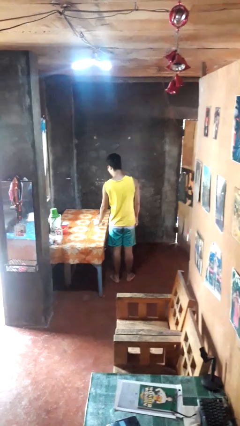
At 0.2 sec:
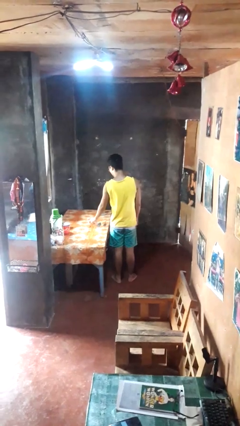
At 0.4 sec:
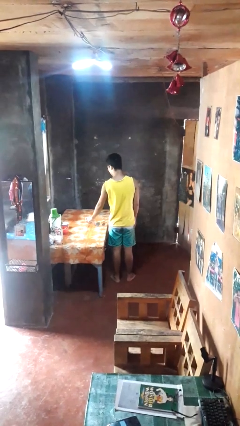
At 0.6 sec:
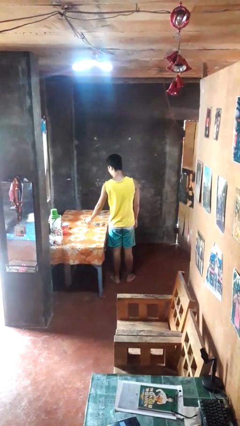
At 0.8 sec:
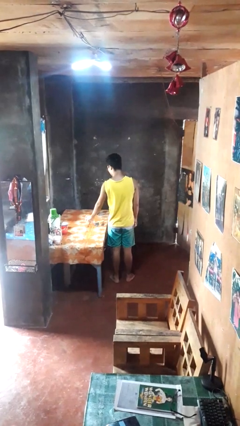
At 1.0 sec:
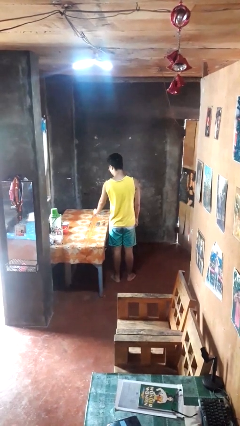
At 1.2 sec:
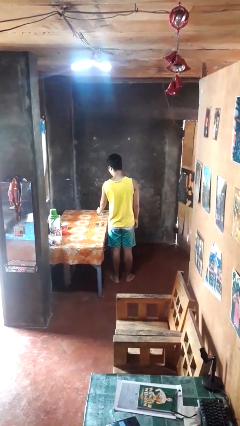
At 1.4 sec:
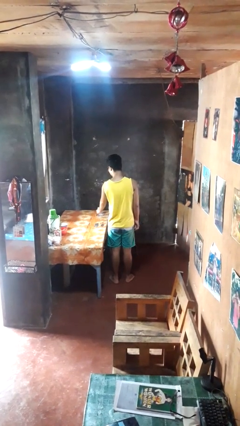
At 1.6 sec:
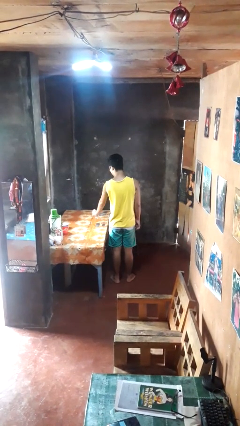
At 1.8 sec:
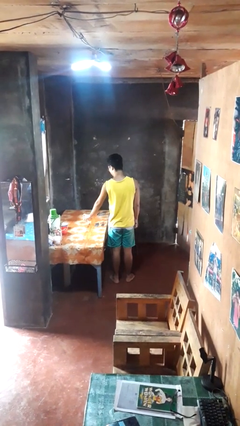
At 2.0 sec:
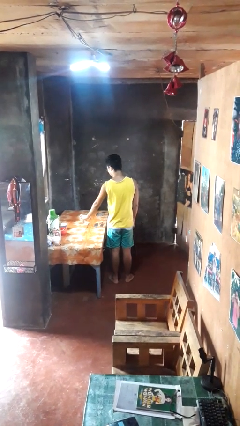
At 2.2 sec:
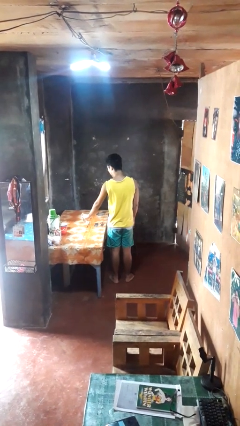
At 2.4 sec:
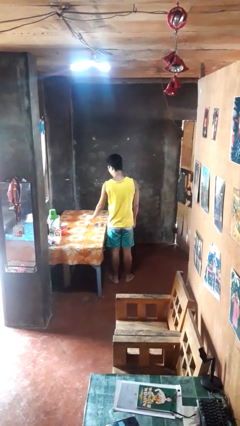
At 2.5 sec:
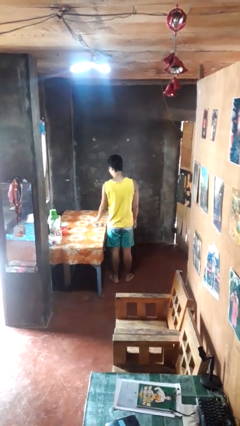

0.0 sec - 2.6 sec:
person sprays from bottle

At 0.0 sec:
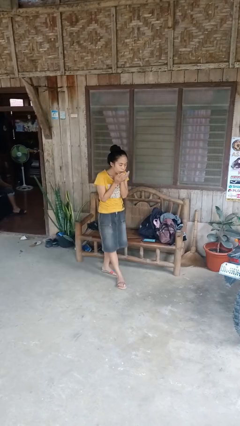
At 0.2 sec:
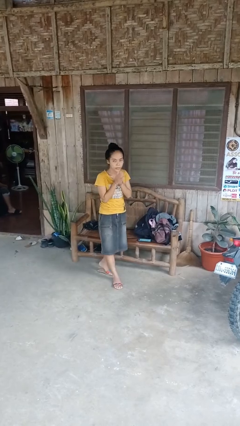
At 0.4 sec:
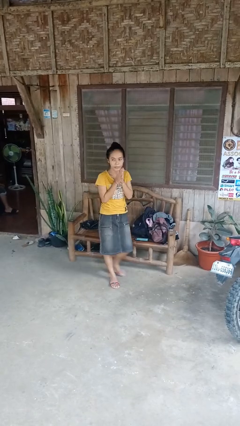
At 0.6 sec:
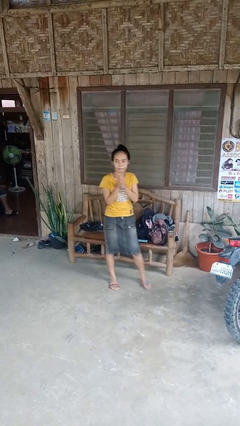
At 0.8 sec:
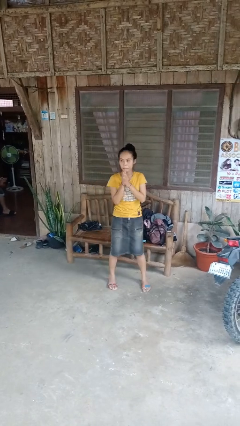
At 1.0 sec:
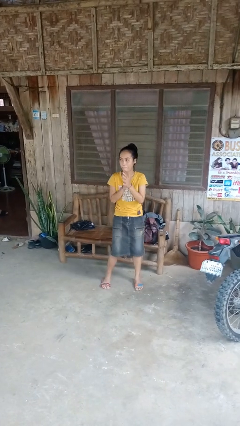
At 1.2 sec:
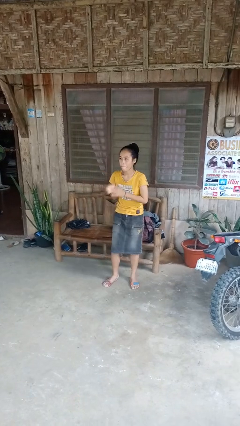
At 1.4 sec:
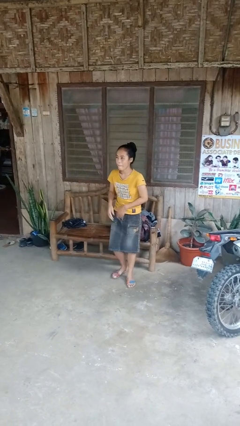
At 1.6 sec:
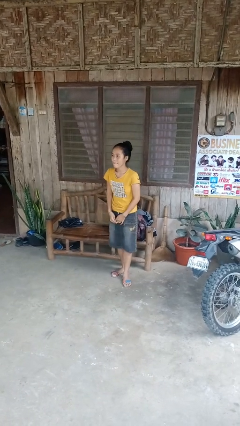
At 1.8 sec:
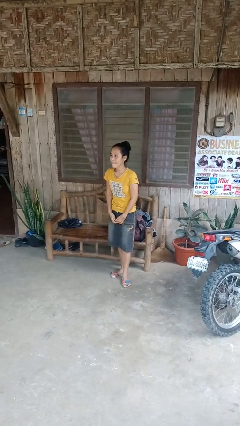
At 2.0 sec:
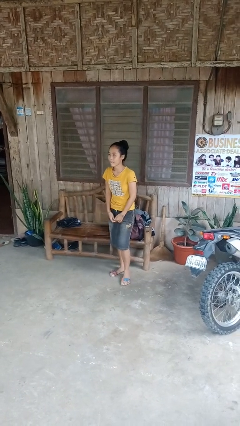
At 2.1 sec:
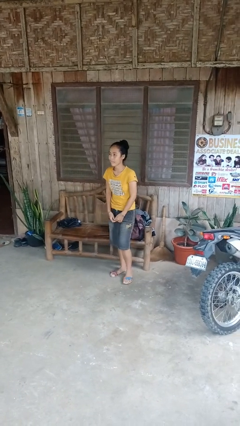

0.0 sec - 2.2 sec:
person blows into hands

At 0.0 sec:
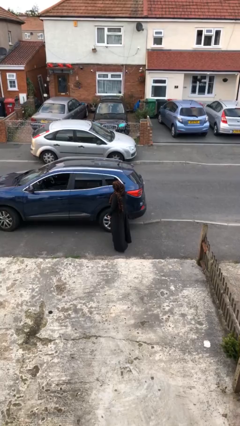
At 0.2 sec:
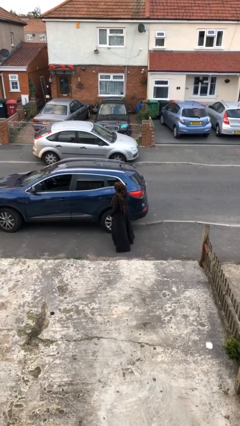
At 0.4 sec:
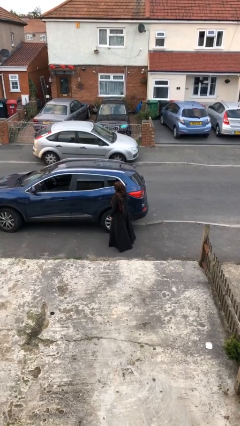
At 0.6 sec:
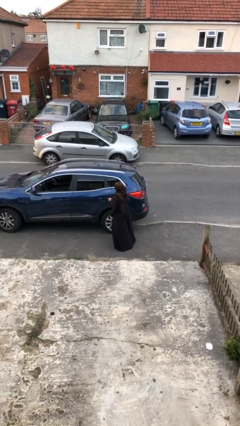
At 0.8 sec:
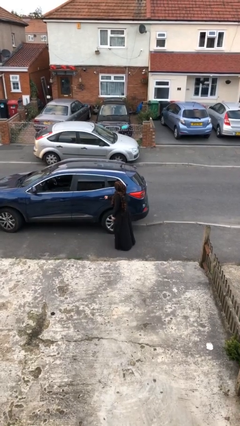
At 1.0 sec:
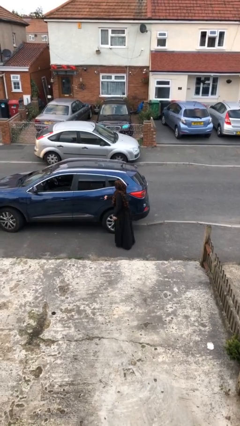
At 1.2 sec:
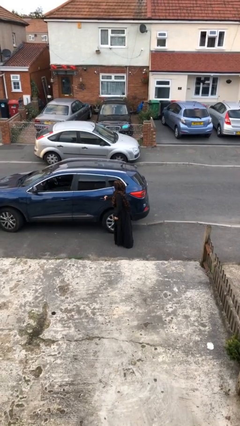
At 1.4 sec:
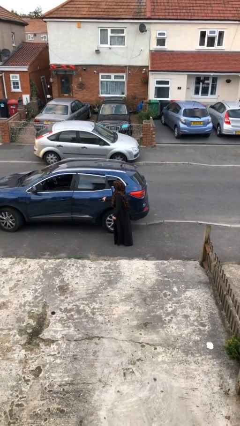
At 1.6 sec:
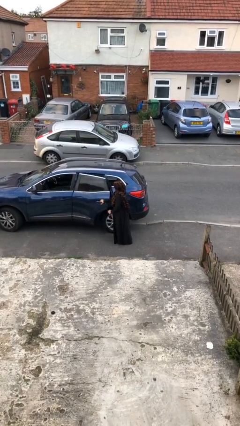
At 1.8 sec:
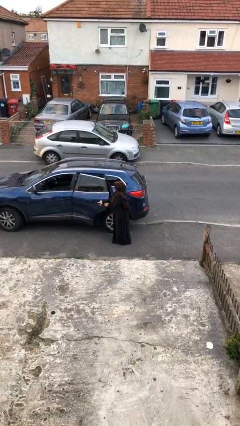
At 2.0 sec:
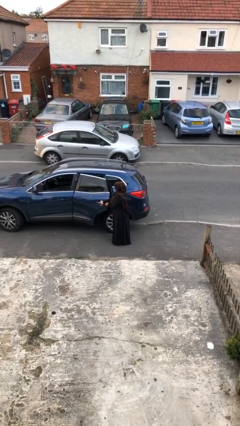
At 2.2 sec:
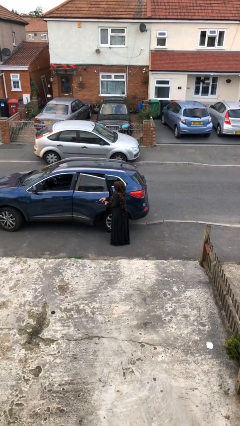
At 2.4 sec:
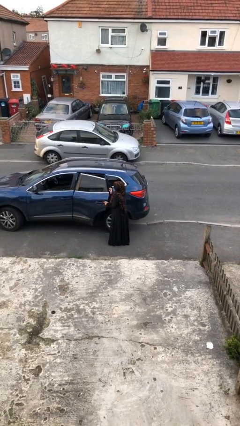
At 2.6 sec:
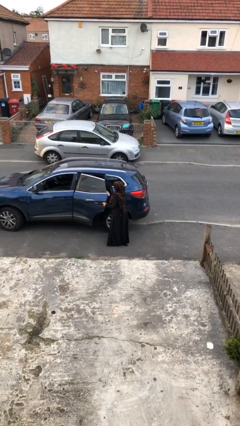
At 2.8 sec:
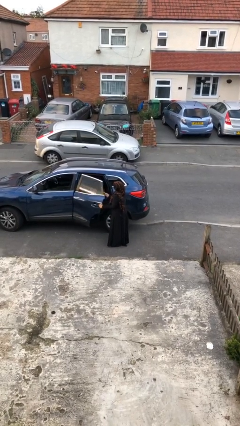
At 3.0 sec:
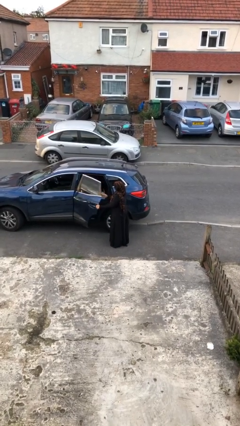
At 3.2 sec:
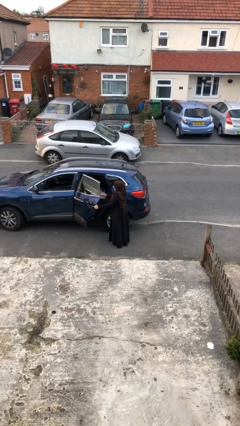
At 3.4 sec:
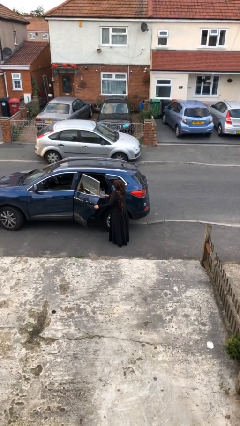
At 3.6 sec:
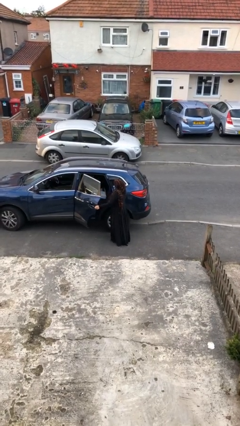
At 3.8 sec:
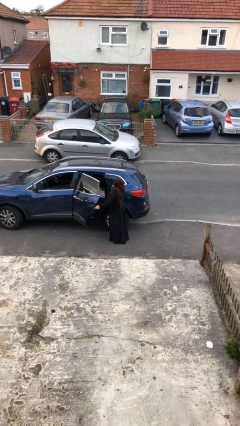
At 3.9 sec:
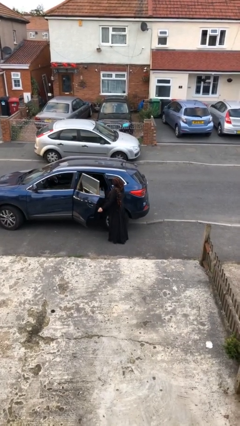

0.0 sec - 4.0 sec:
person opens car door

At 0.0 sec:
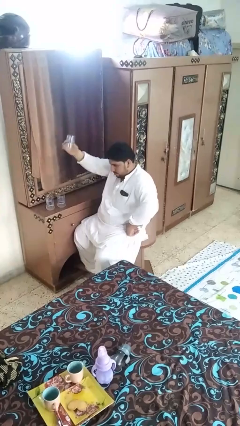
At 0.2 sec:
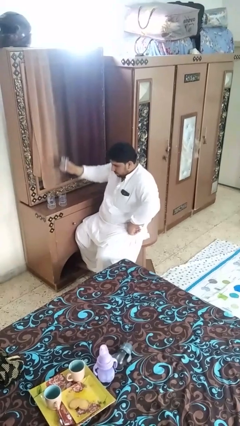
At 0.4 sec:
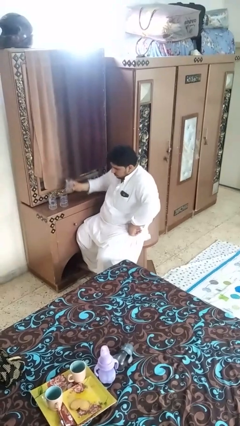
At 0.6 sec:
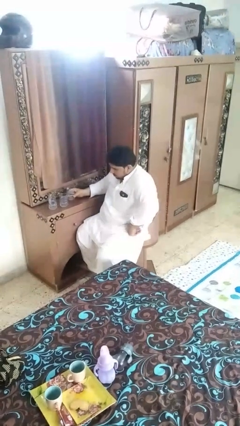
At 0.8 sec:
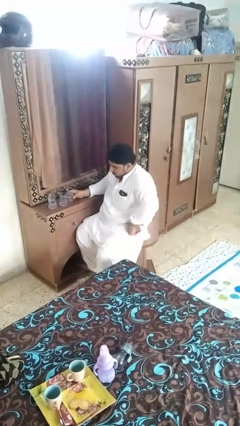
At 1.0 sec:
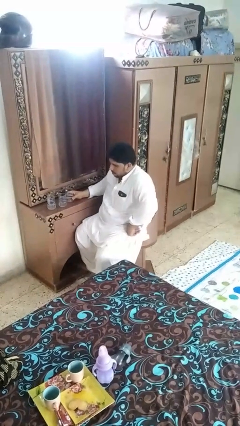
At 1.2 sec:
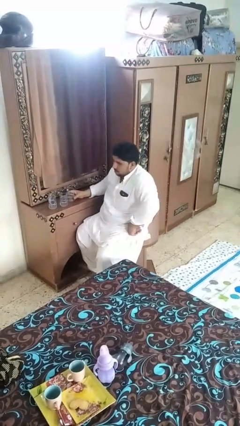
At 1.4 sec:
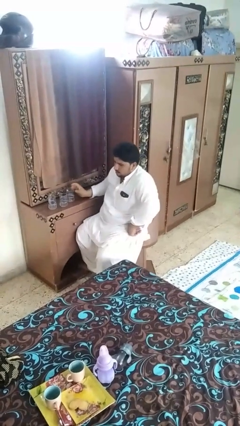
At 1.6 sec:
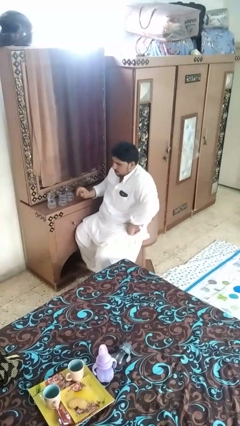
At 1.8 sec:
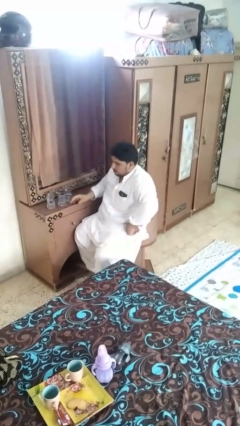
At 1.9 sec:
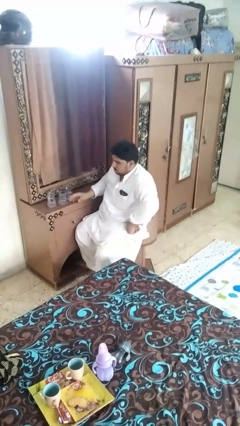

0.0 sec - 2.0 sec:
person puts down object on table

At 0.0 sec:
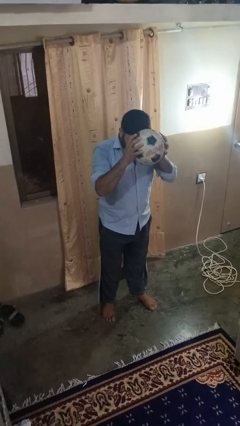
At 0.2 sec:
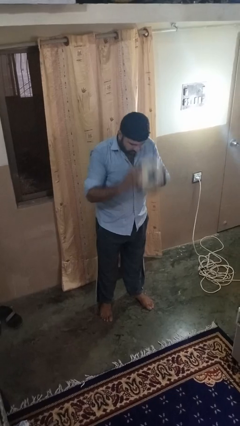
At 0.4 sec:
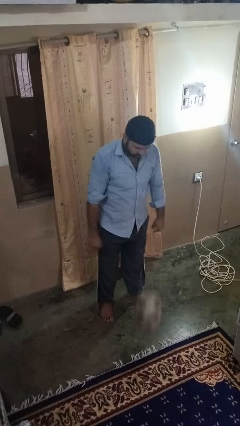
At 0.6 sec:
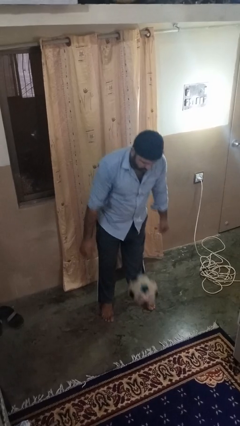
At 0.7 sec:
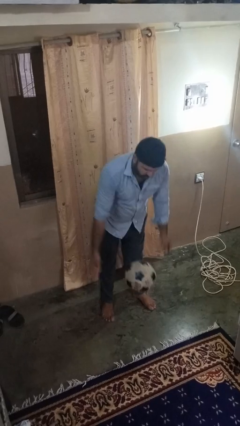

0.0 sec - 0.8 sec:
person bounces ball on floor

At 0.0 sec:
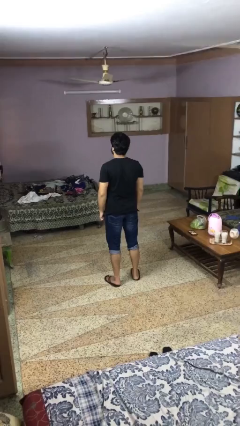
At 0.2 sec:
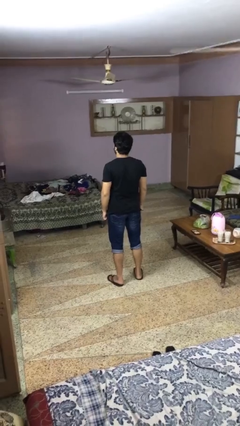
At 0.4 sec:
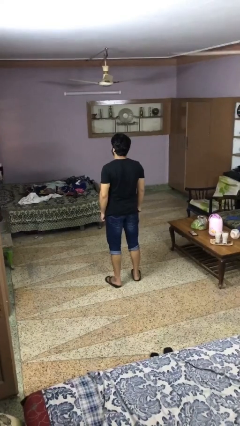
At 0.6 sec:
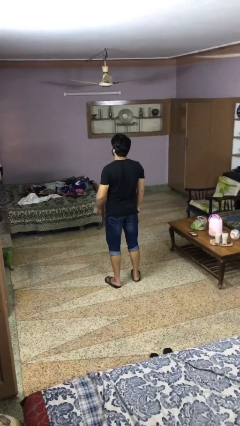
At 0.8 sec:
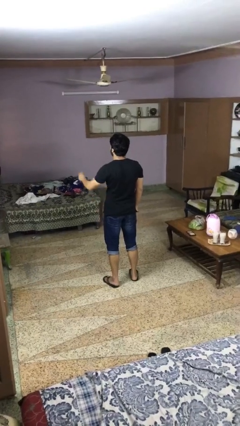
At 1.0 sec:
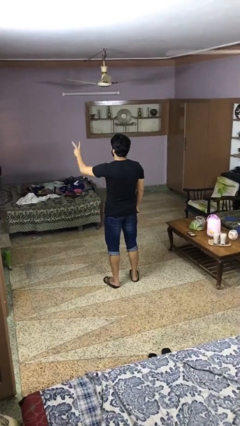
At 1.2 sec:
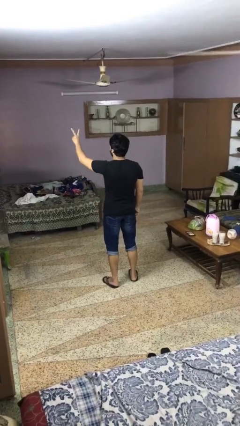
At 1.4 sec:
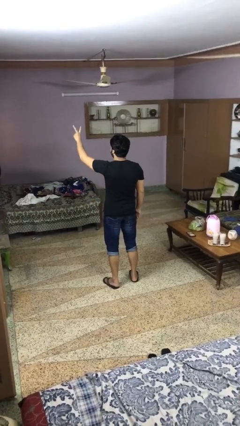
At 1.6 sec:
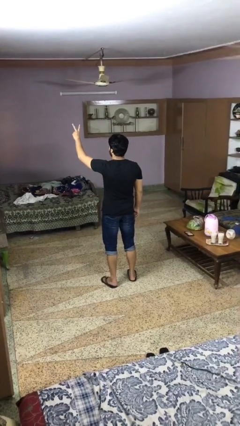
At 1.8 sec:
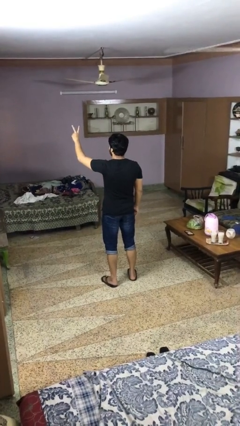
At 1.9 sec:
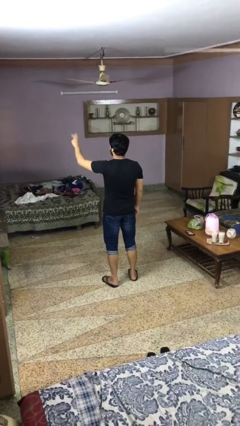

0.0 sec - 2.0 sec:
person gestures peace

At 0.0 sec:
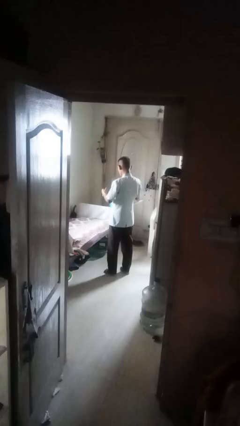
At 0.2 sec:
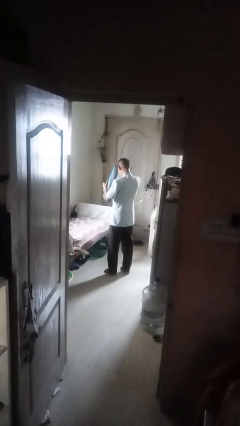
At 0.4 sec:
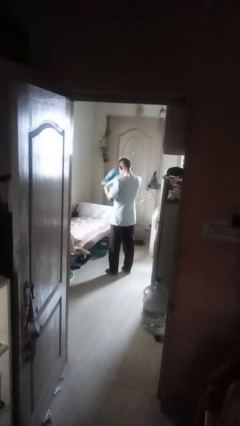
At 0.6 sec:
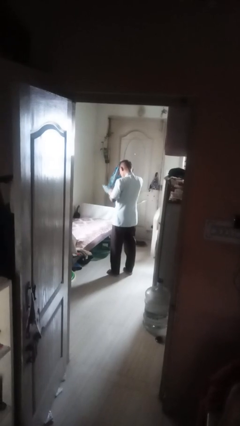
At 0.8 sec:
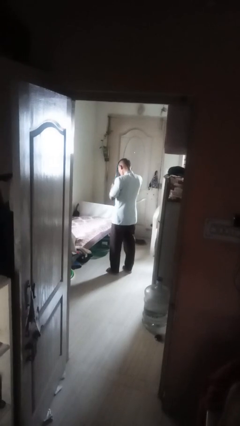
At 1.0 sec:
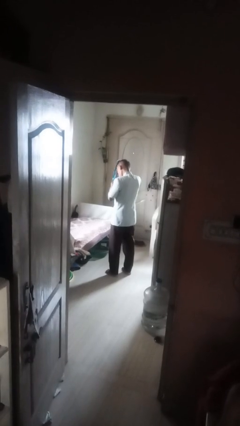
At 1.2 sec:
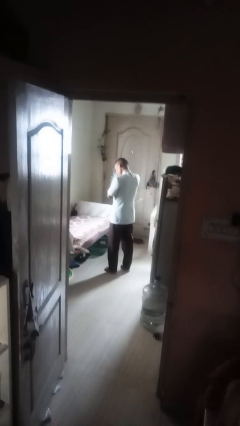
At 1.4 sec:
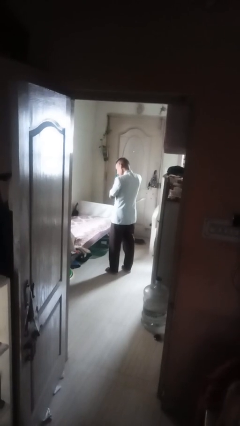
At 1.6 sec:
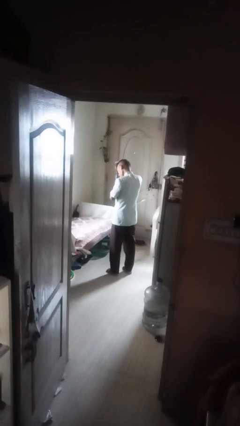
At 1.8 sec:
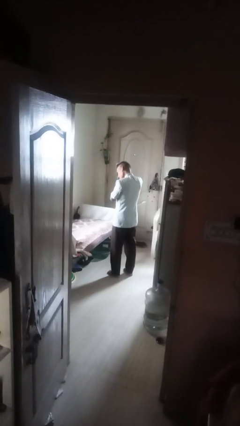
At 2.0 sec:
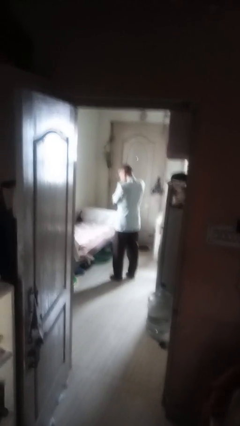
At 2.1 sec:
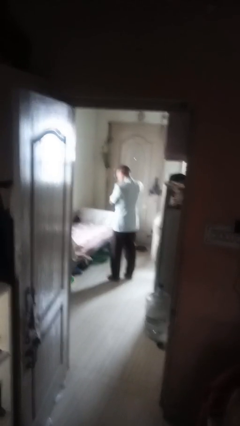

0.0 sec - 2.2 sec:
person dries hair with towel

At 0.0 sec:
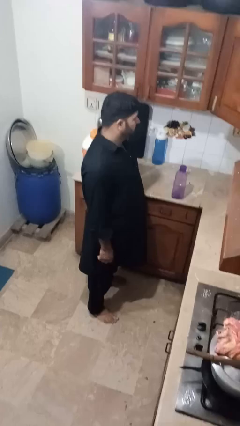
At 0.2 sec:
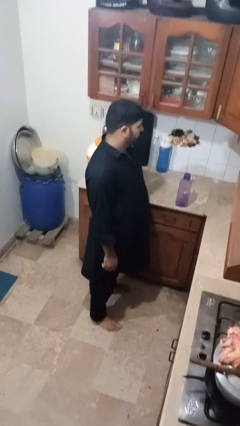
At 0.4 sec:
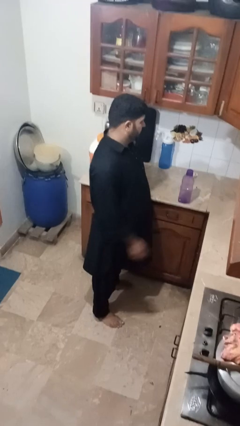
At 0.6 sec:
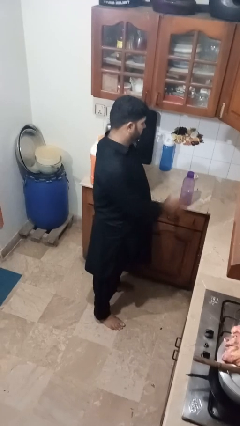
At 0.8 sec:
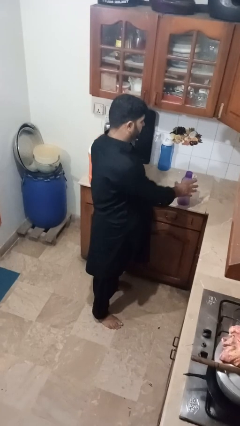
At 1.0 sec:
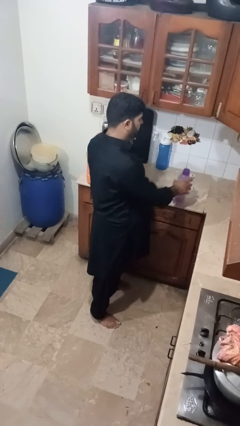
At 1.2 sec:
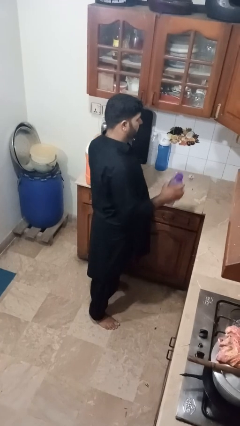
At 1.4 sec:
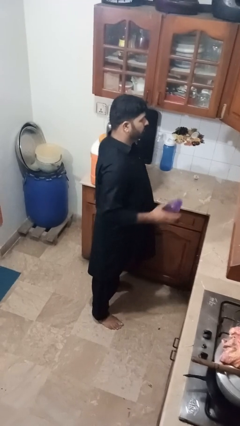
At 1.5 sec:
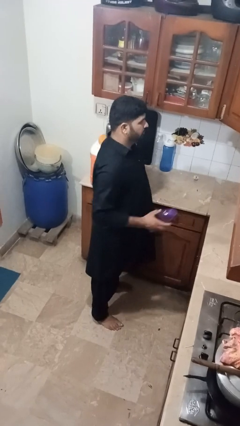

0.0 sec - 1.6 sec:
person picks up object from countertop
